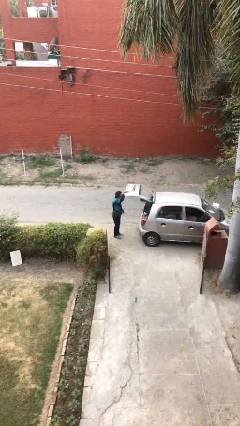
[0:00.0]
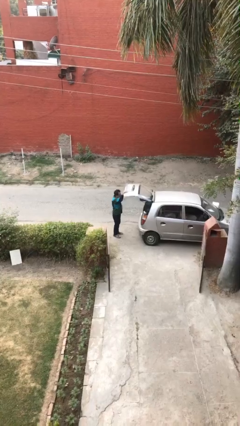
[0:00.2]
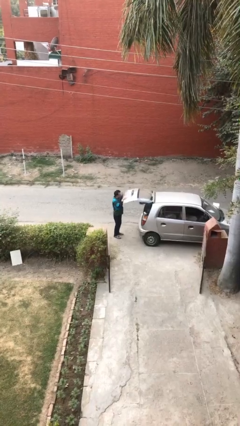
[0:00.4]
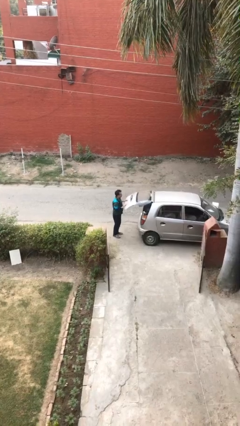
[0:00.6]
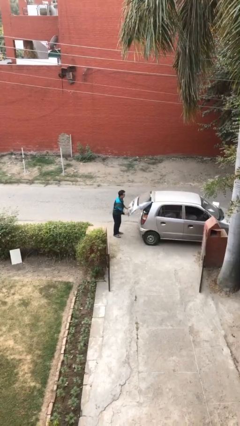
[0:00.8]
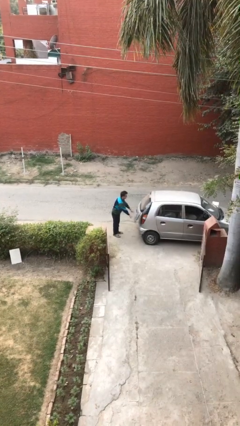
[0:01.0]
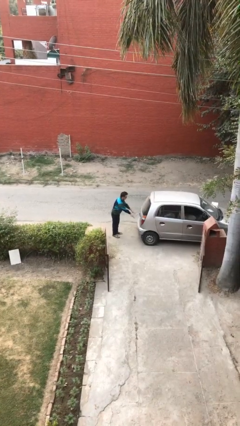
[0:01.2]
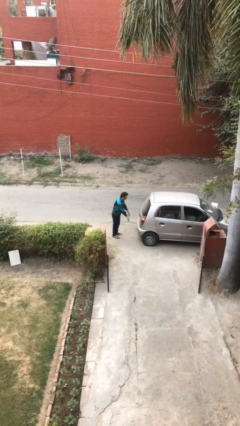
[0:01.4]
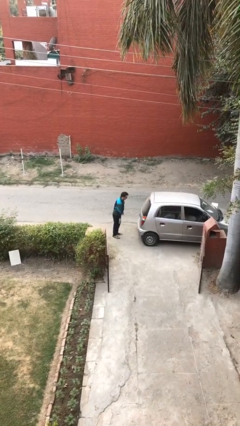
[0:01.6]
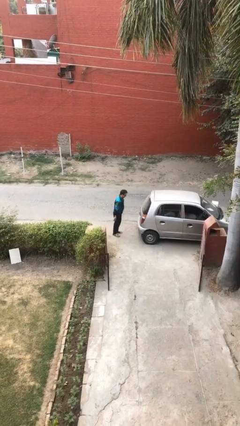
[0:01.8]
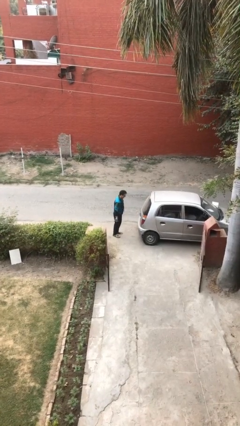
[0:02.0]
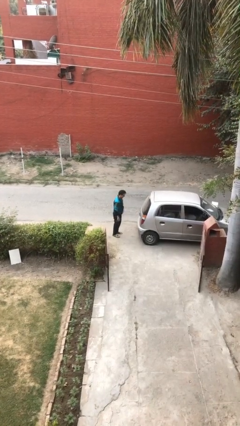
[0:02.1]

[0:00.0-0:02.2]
person closes car trunk

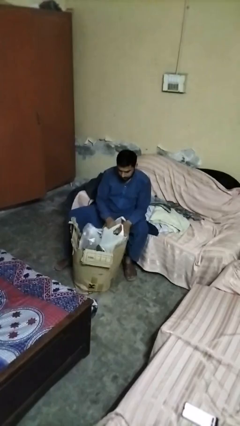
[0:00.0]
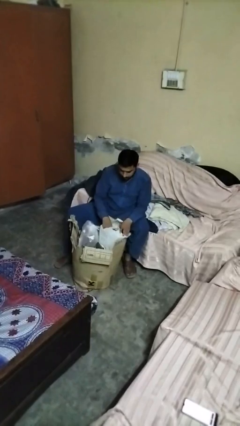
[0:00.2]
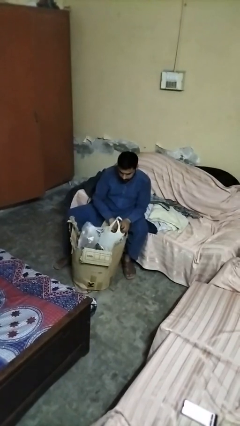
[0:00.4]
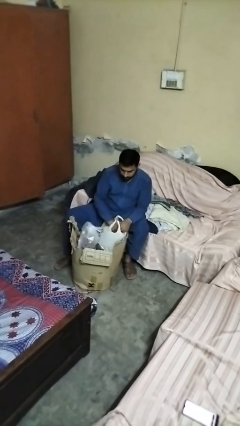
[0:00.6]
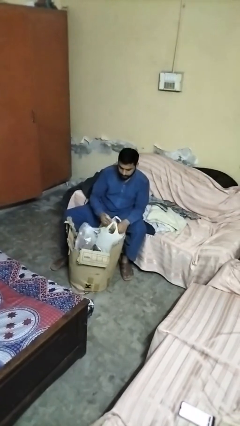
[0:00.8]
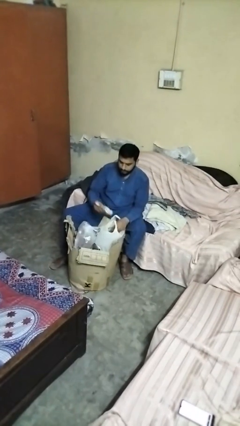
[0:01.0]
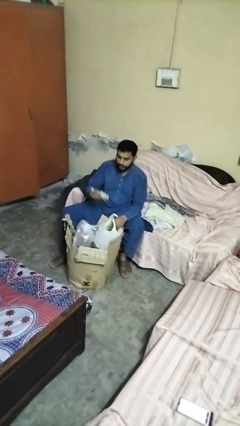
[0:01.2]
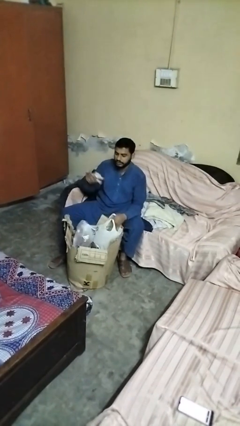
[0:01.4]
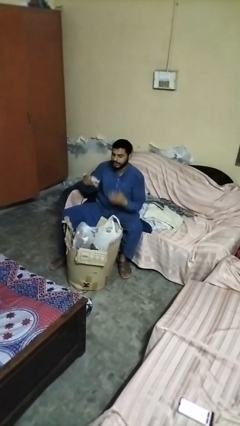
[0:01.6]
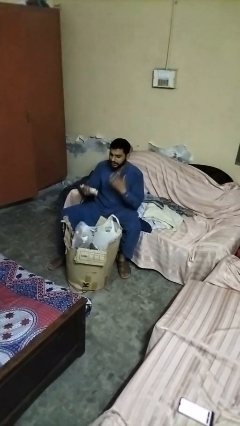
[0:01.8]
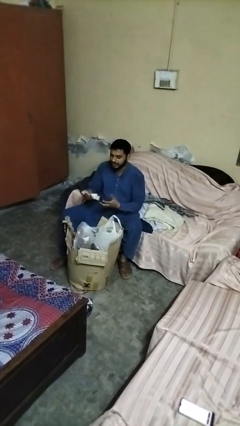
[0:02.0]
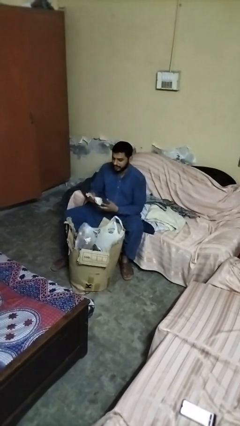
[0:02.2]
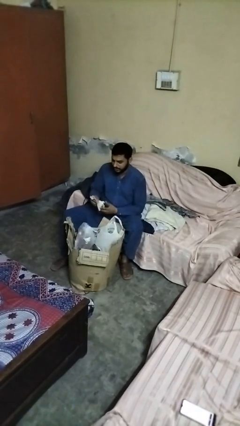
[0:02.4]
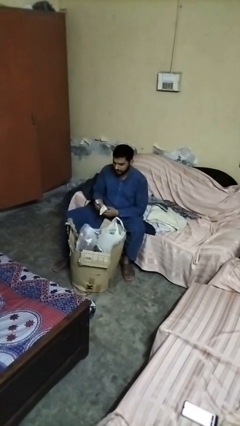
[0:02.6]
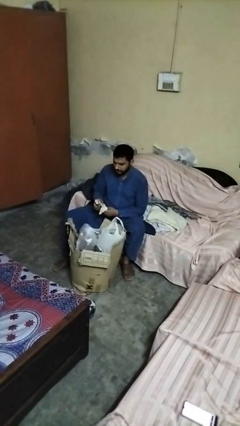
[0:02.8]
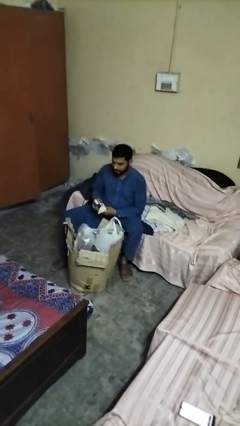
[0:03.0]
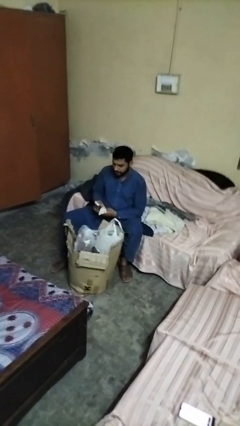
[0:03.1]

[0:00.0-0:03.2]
person takes object from box

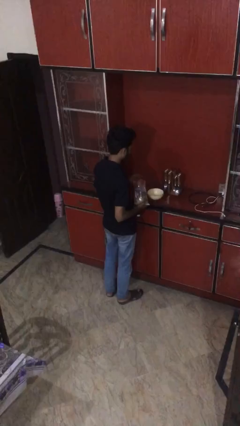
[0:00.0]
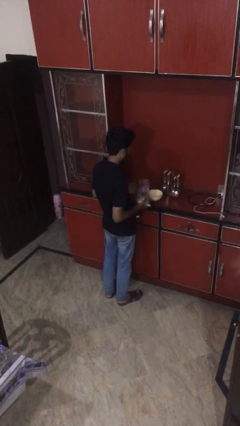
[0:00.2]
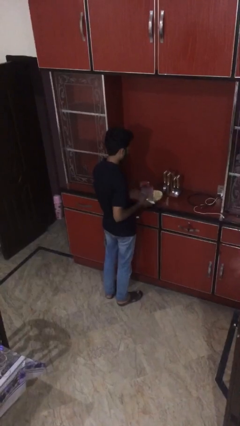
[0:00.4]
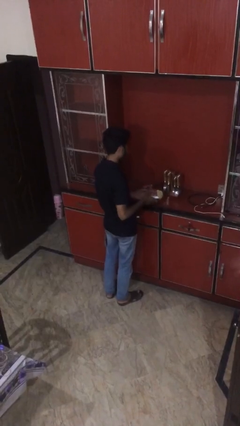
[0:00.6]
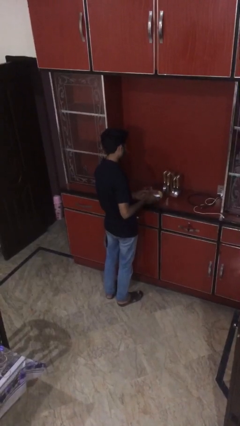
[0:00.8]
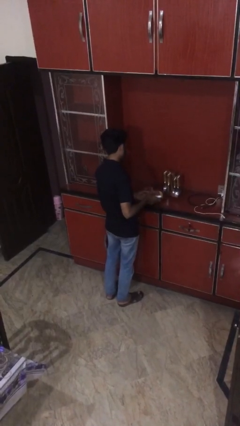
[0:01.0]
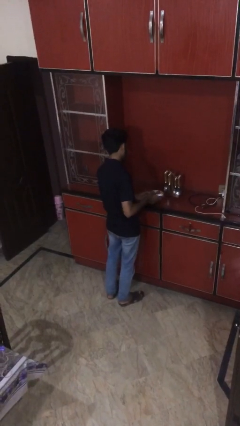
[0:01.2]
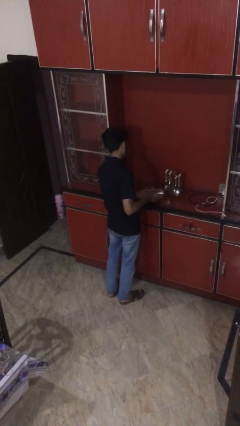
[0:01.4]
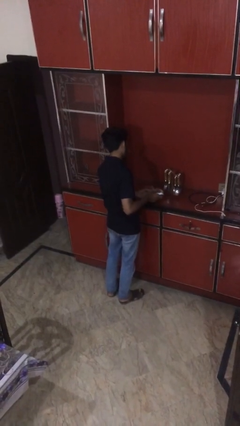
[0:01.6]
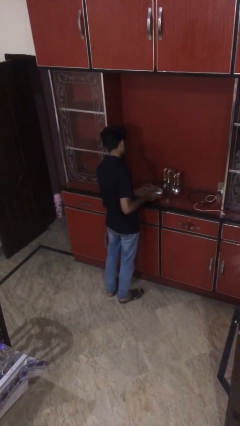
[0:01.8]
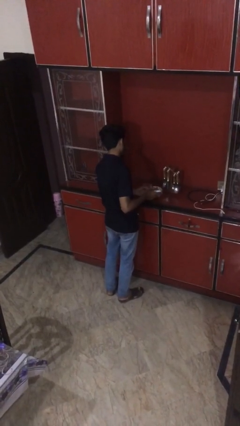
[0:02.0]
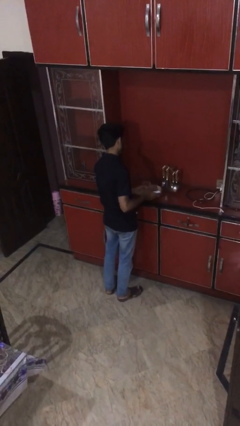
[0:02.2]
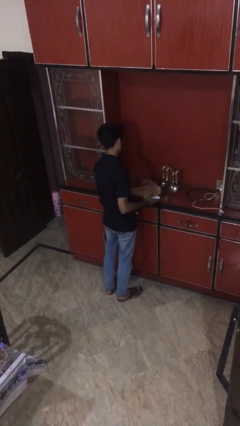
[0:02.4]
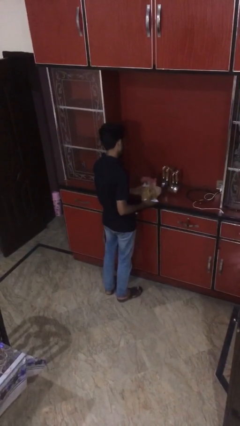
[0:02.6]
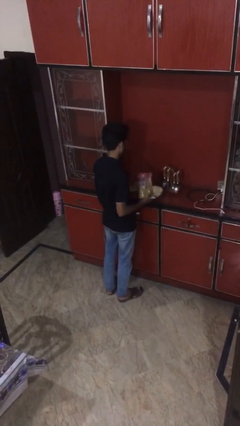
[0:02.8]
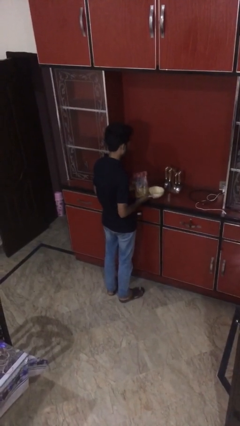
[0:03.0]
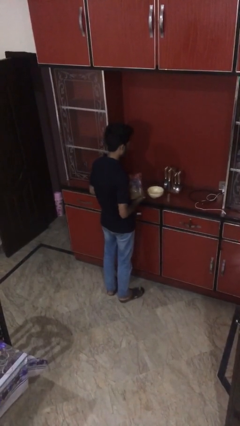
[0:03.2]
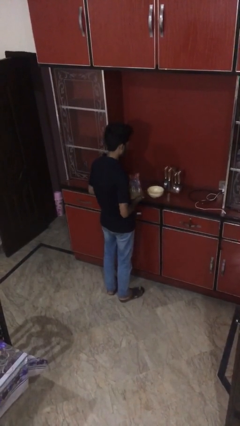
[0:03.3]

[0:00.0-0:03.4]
person pours into bowl

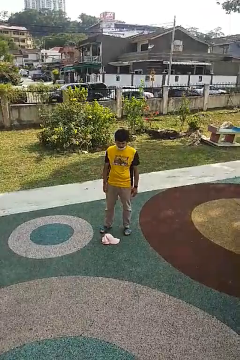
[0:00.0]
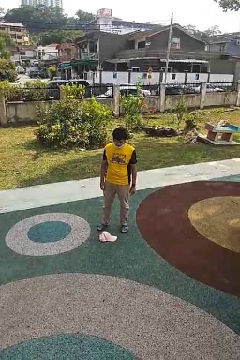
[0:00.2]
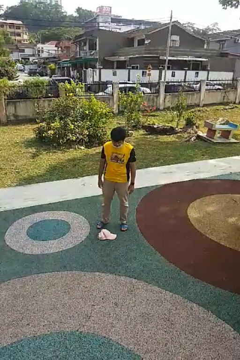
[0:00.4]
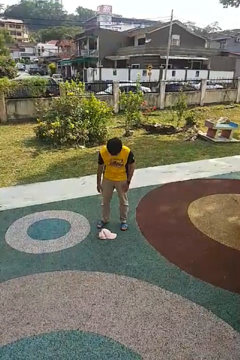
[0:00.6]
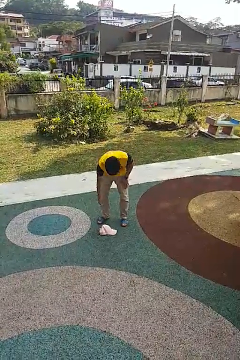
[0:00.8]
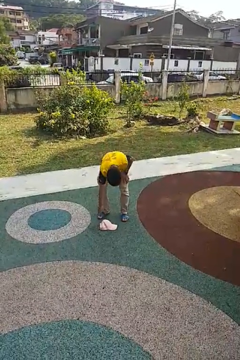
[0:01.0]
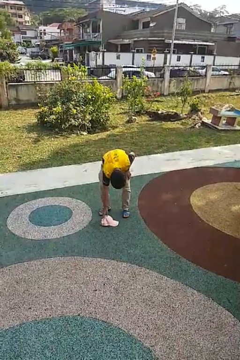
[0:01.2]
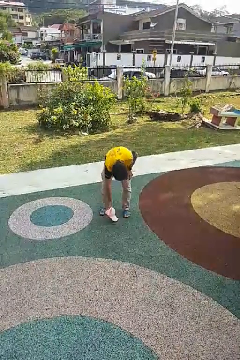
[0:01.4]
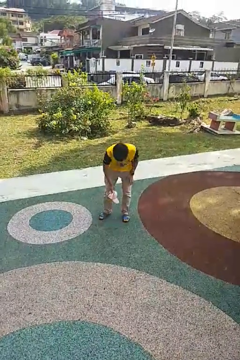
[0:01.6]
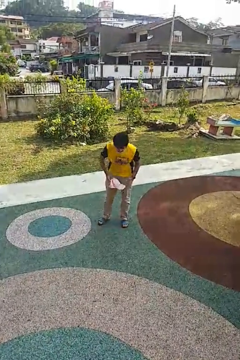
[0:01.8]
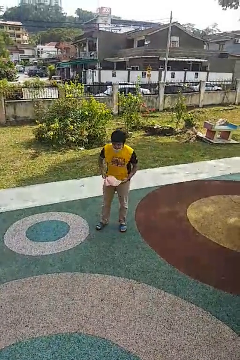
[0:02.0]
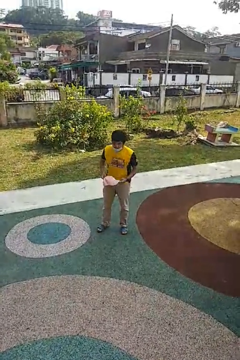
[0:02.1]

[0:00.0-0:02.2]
person picks up object from floor

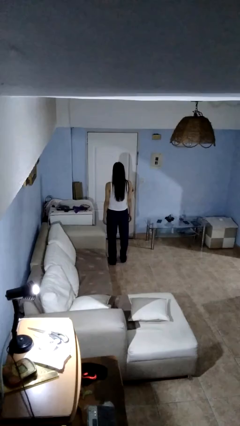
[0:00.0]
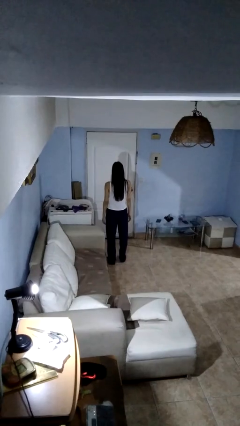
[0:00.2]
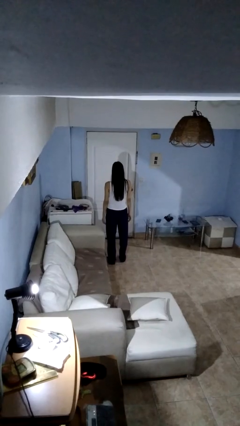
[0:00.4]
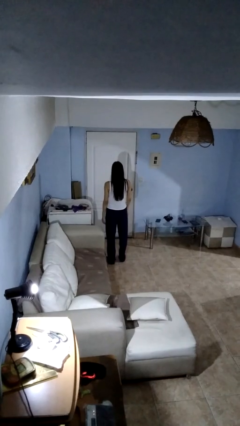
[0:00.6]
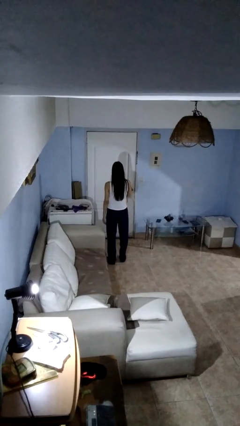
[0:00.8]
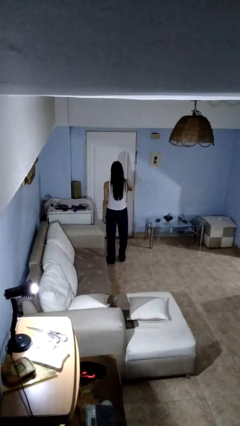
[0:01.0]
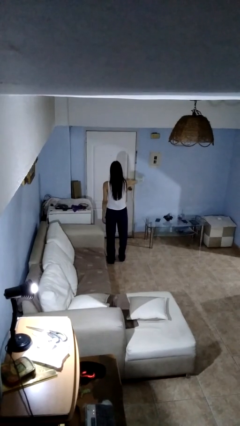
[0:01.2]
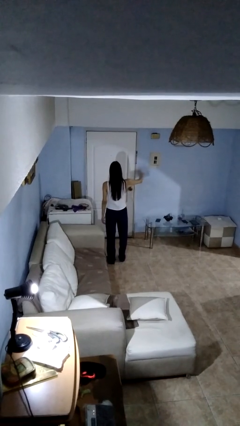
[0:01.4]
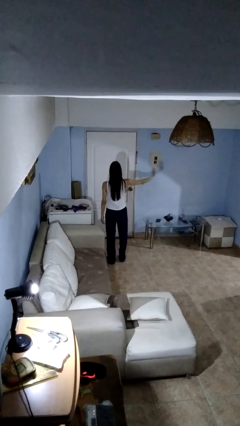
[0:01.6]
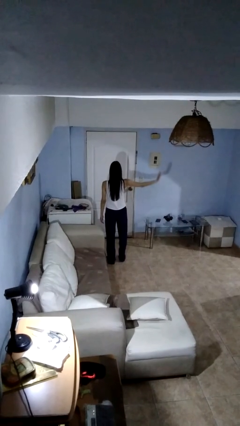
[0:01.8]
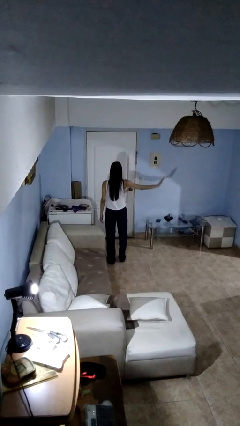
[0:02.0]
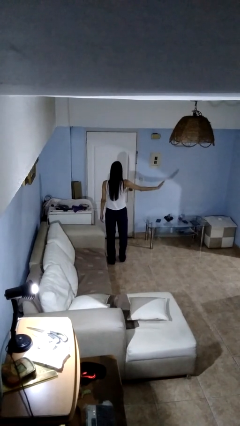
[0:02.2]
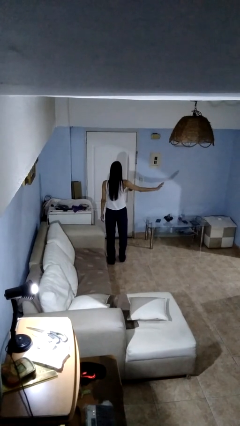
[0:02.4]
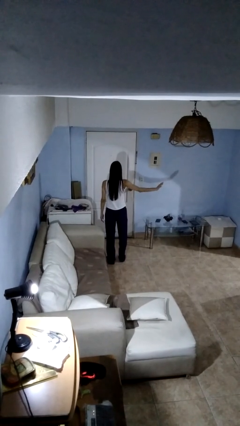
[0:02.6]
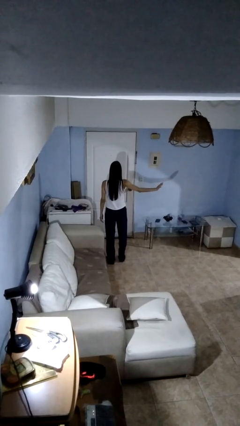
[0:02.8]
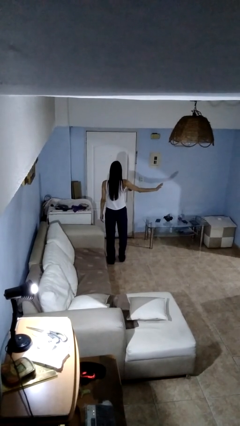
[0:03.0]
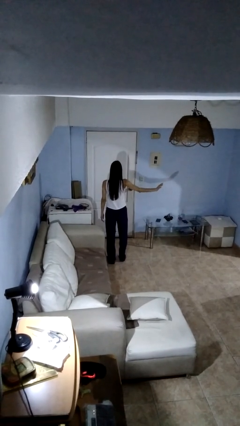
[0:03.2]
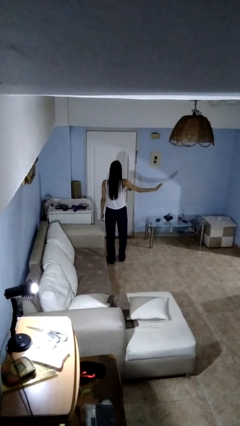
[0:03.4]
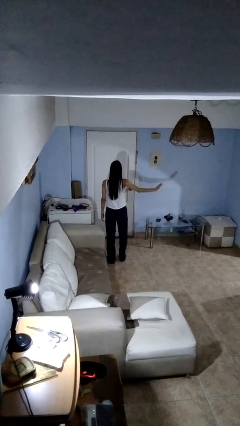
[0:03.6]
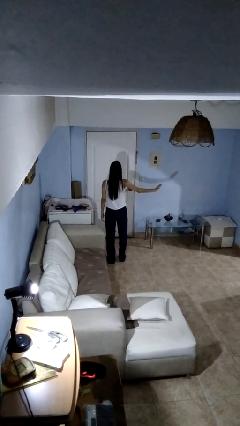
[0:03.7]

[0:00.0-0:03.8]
person gestures swipe left

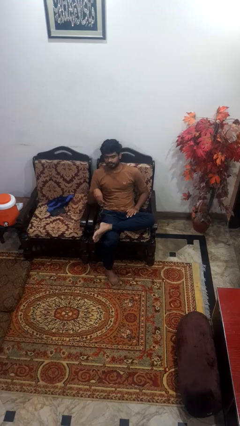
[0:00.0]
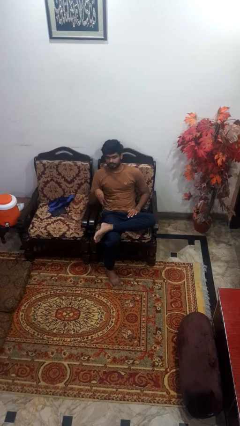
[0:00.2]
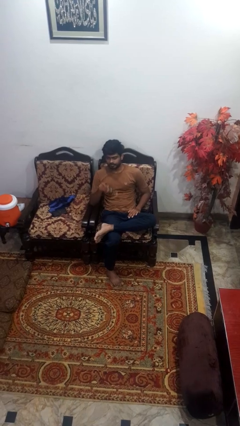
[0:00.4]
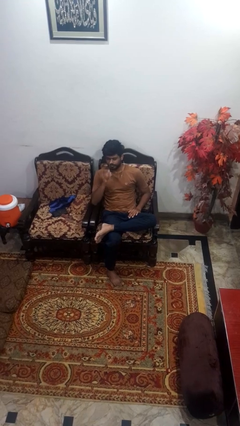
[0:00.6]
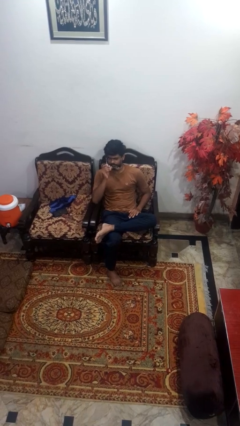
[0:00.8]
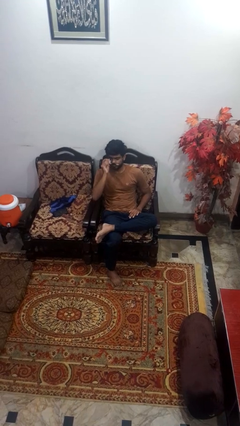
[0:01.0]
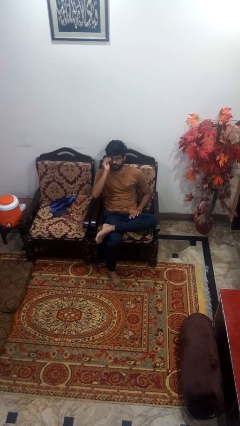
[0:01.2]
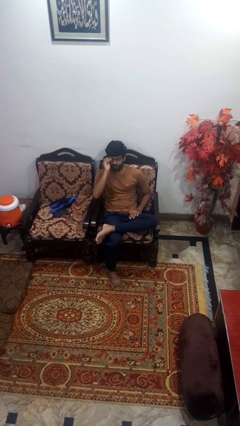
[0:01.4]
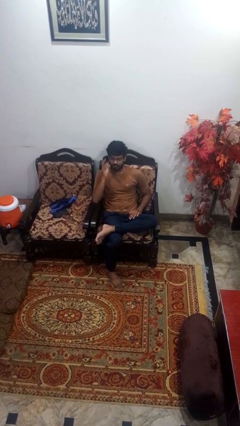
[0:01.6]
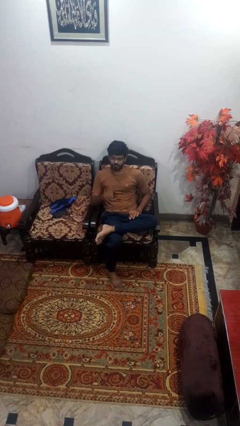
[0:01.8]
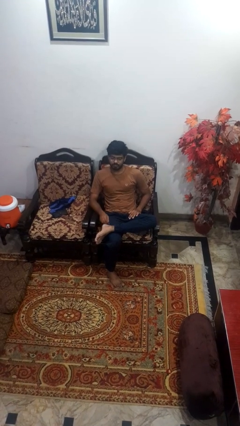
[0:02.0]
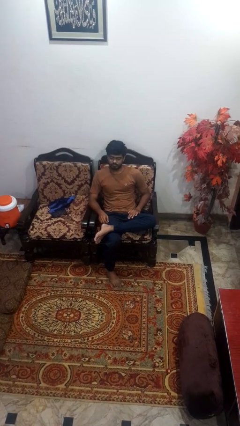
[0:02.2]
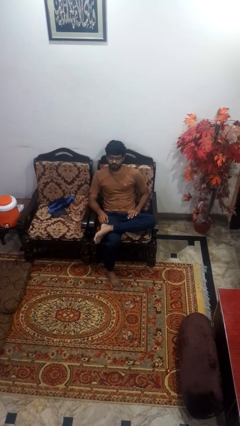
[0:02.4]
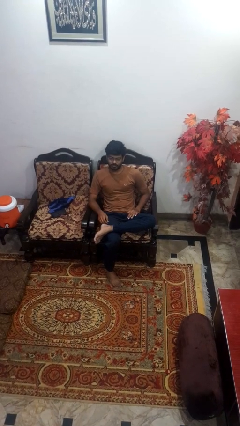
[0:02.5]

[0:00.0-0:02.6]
person puts on glasses
